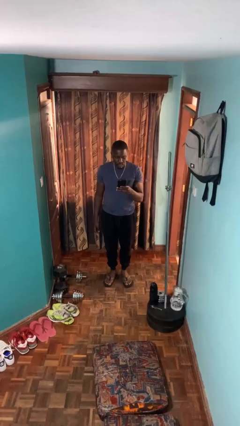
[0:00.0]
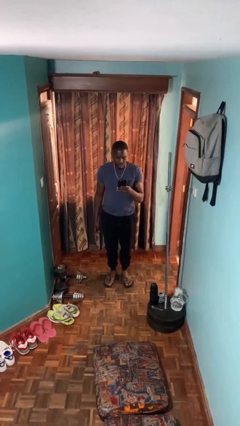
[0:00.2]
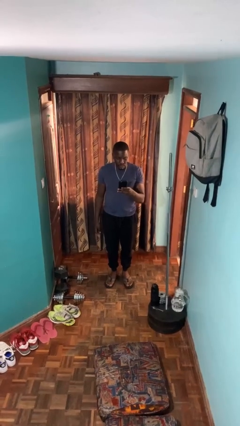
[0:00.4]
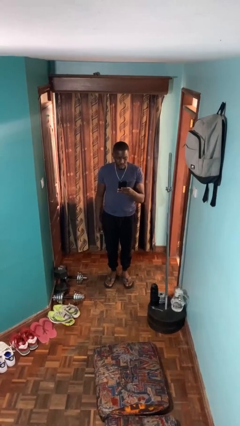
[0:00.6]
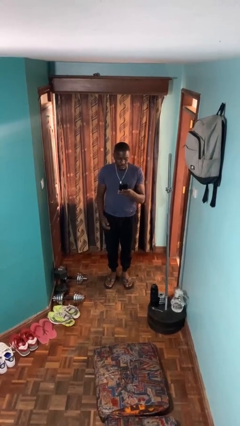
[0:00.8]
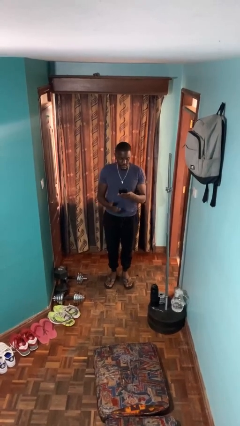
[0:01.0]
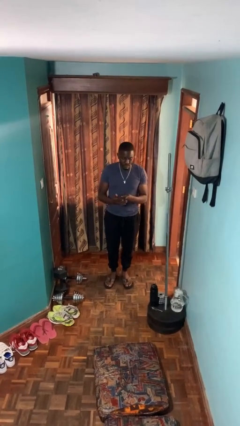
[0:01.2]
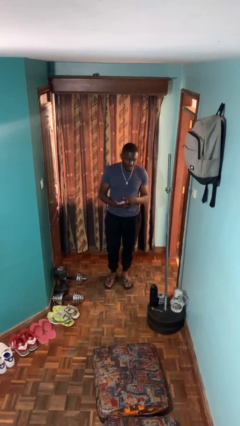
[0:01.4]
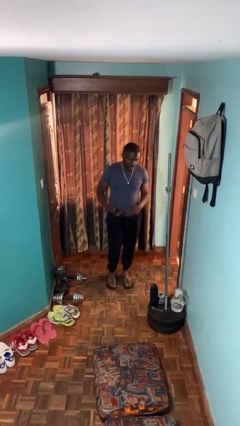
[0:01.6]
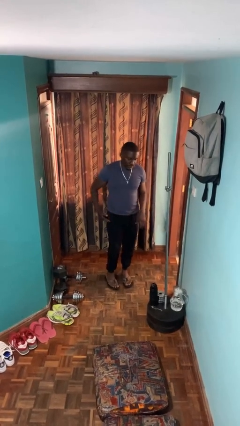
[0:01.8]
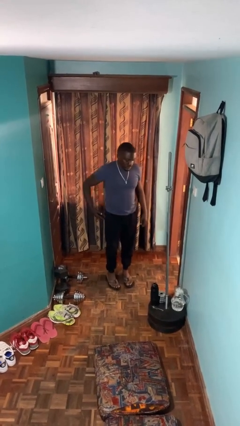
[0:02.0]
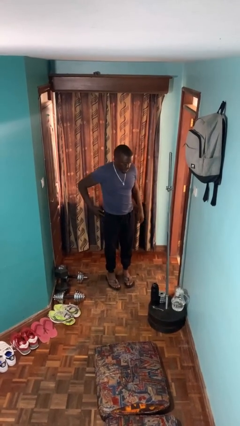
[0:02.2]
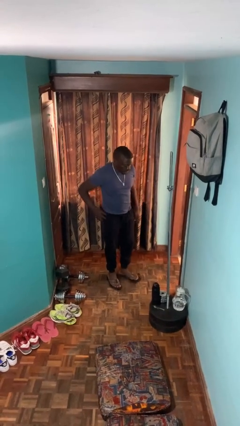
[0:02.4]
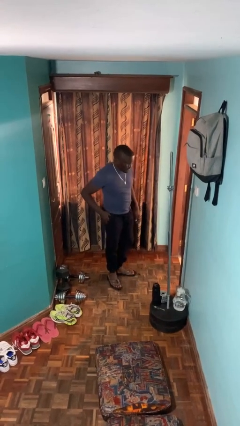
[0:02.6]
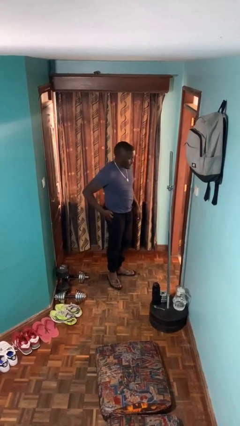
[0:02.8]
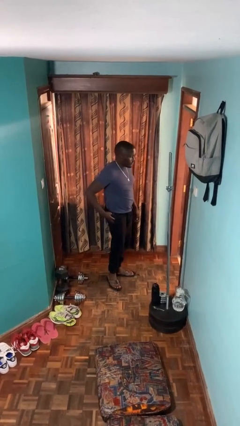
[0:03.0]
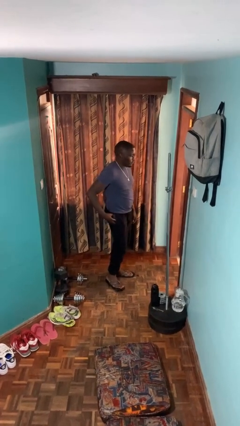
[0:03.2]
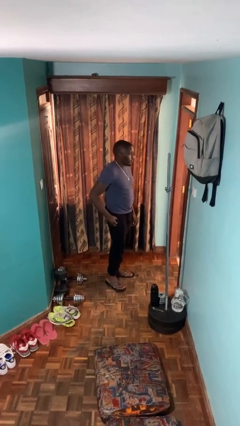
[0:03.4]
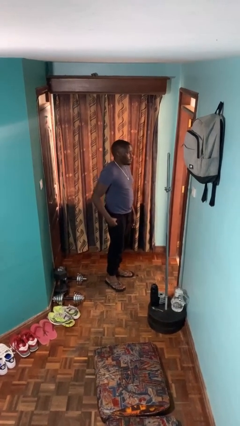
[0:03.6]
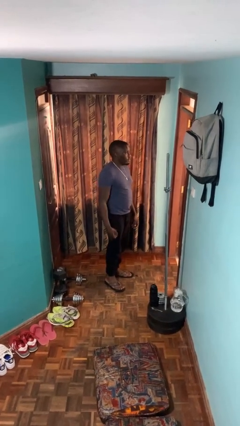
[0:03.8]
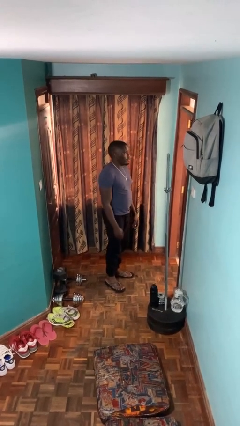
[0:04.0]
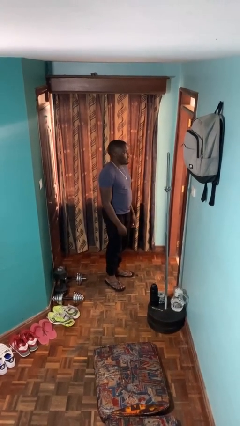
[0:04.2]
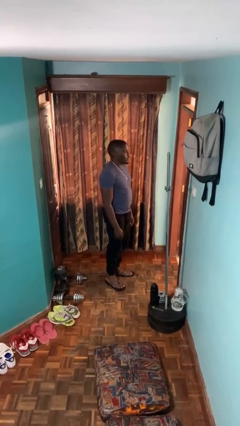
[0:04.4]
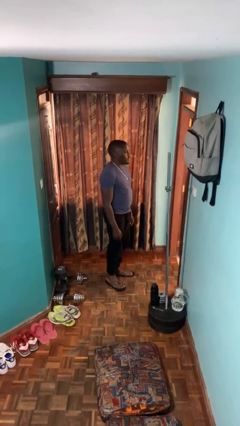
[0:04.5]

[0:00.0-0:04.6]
person puts phone into pocket

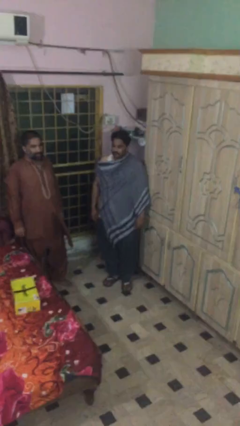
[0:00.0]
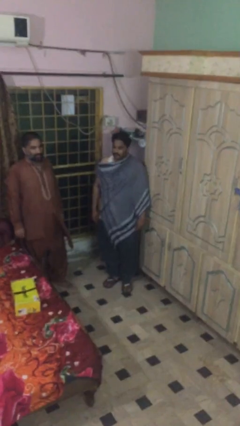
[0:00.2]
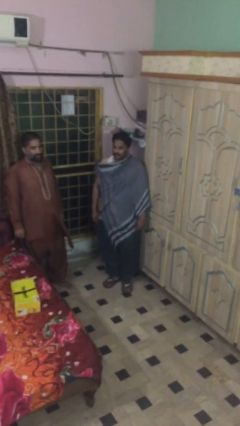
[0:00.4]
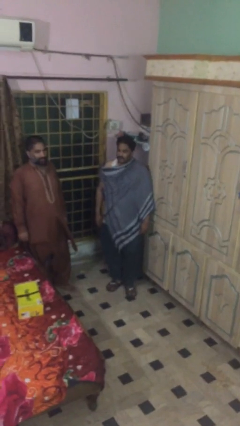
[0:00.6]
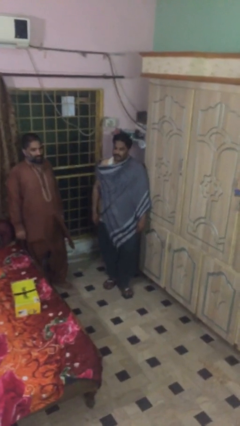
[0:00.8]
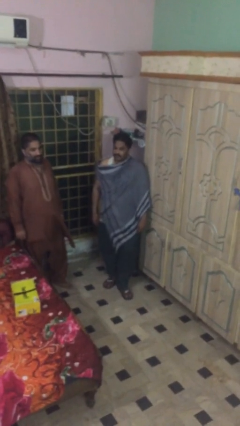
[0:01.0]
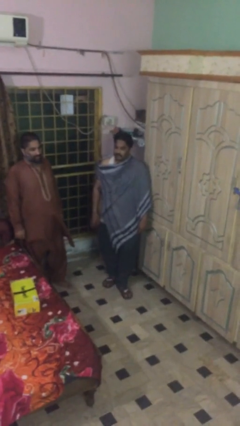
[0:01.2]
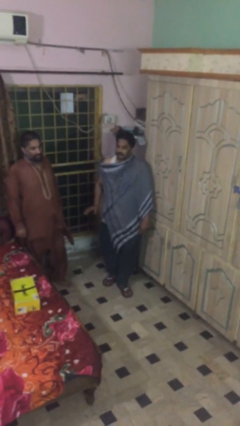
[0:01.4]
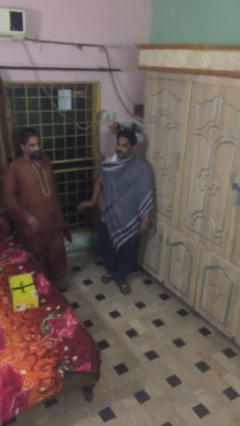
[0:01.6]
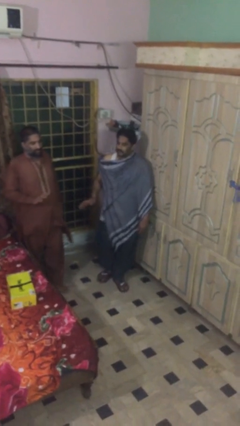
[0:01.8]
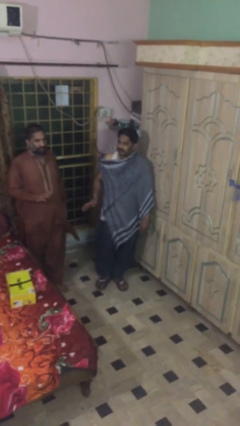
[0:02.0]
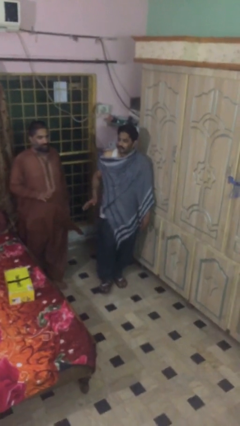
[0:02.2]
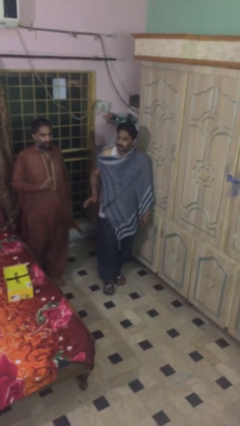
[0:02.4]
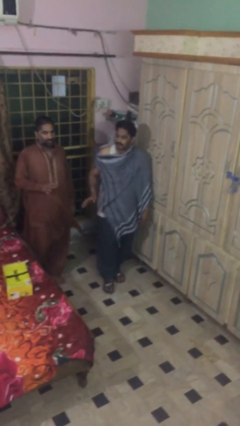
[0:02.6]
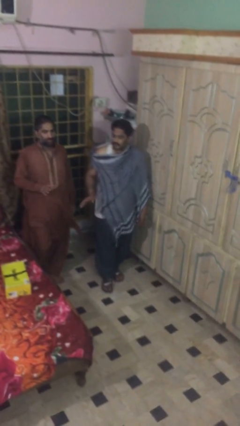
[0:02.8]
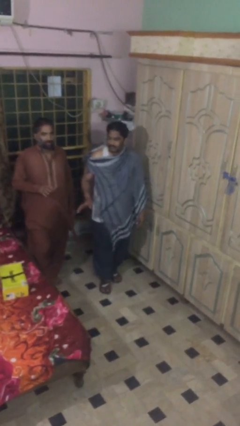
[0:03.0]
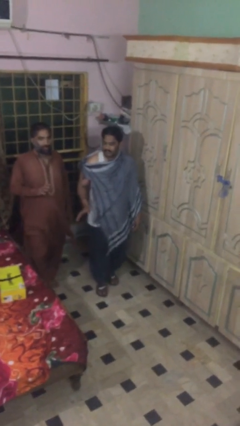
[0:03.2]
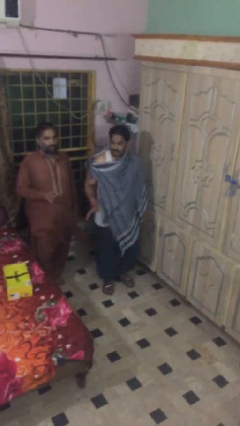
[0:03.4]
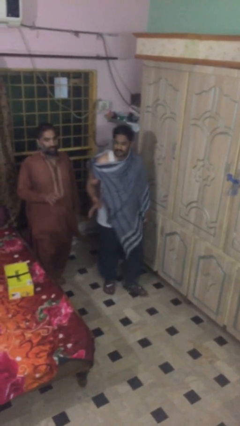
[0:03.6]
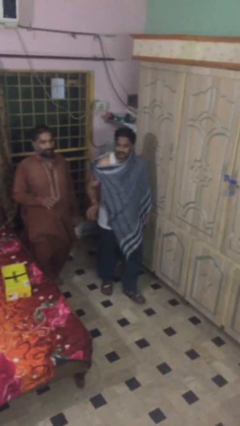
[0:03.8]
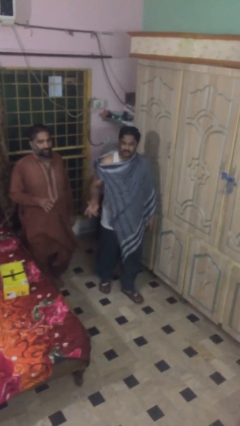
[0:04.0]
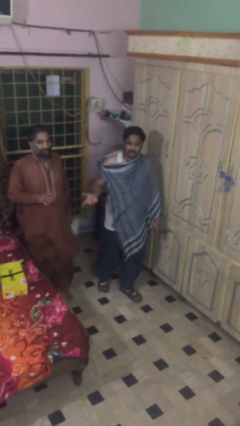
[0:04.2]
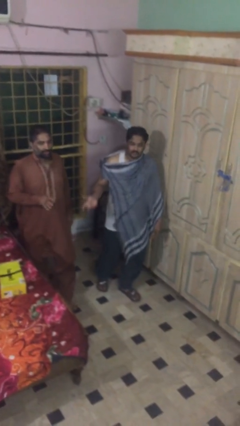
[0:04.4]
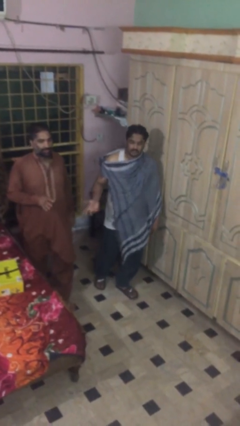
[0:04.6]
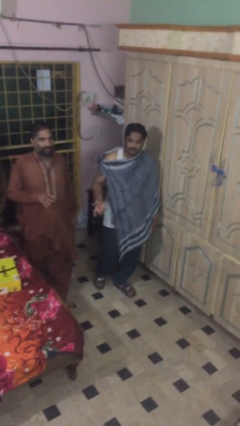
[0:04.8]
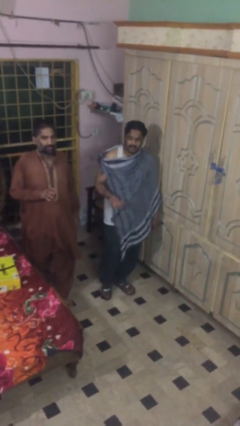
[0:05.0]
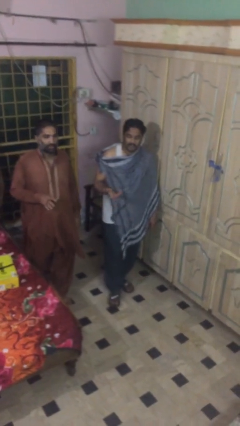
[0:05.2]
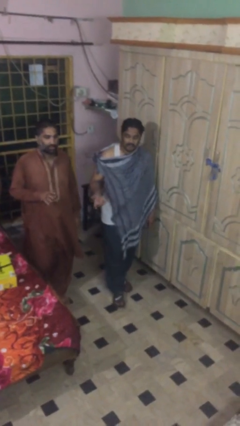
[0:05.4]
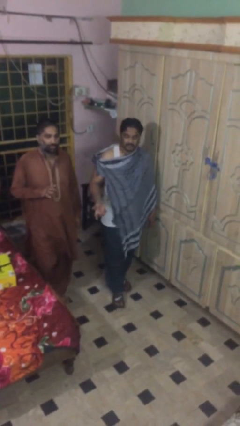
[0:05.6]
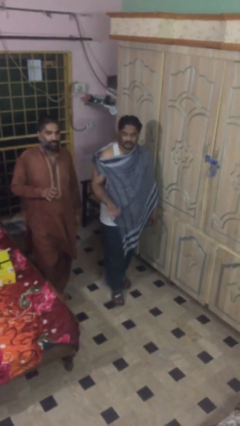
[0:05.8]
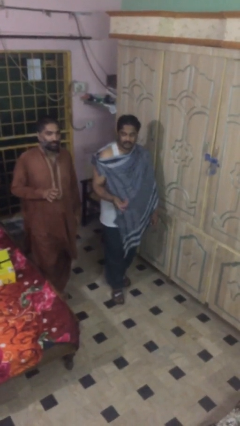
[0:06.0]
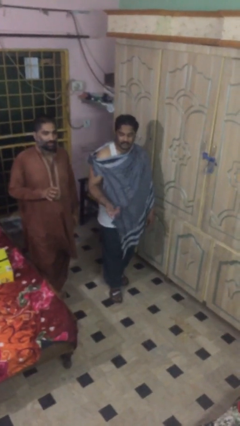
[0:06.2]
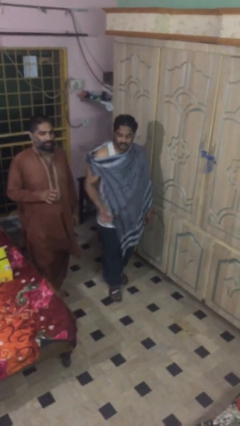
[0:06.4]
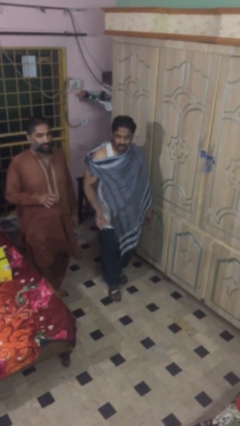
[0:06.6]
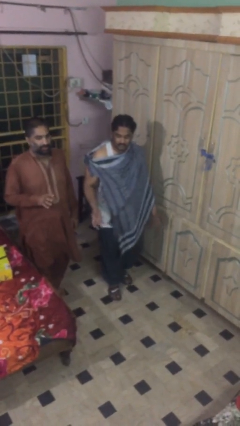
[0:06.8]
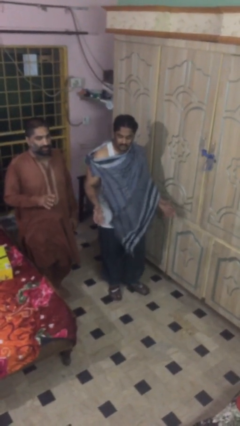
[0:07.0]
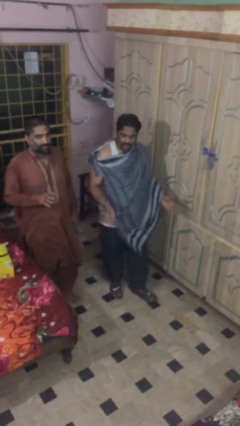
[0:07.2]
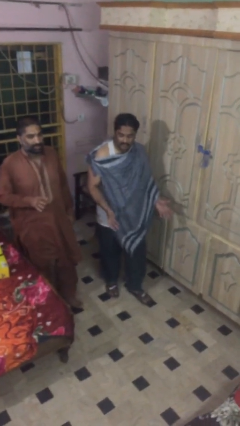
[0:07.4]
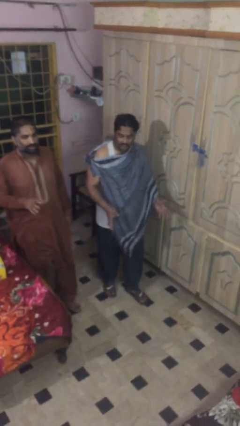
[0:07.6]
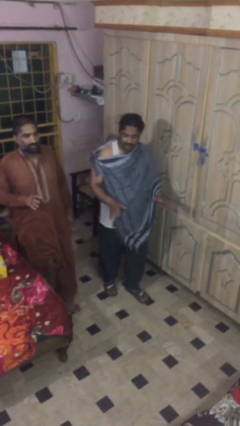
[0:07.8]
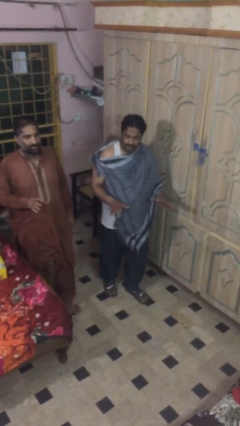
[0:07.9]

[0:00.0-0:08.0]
person talks to person

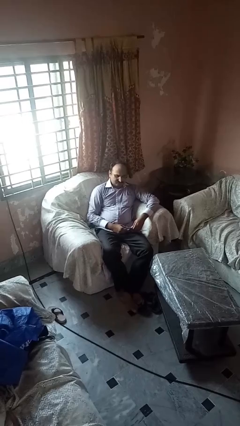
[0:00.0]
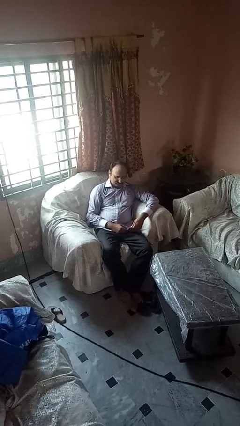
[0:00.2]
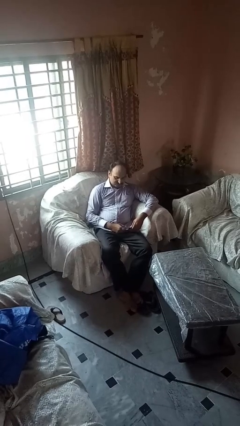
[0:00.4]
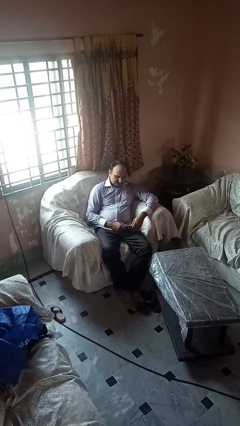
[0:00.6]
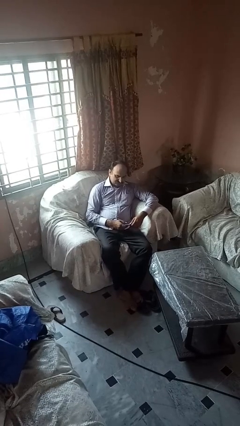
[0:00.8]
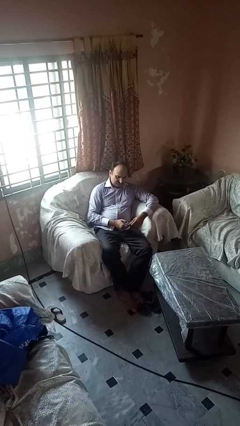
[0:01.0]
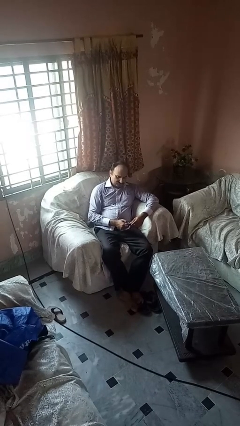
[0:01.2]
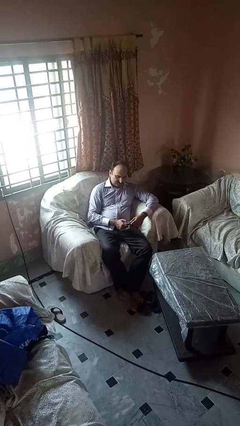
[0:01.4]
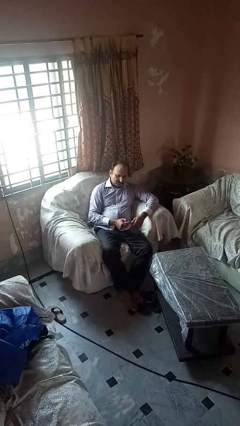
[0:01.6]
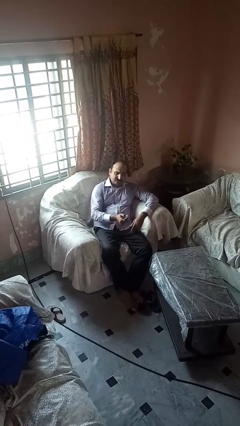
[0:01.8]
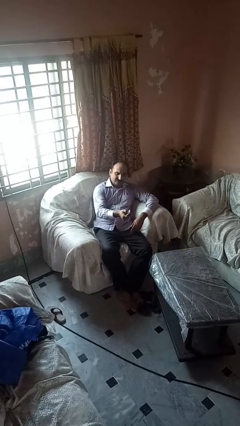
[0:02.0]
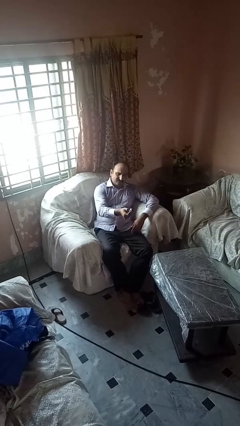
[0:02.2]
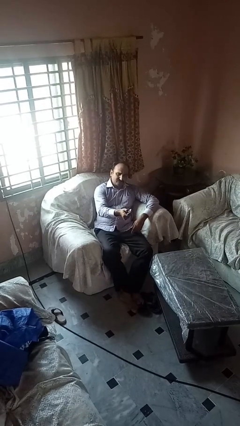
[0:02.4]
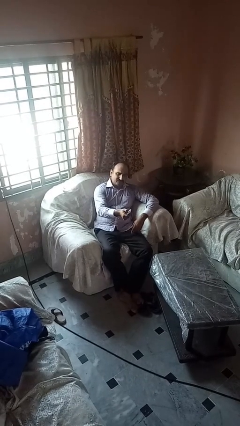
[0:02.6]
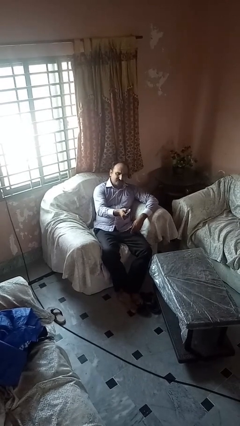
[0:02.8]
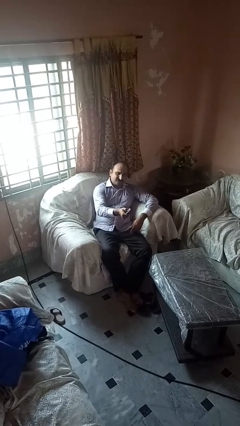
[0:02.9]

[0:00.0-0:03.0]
person uses television remote

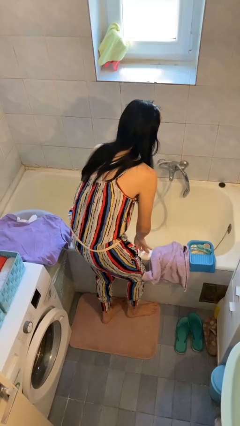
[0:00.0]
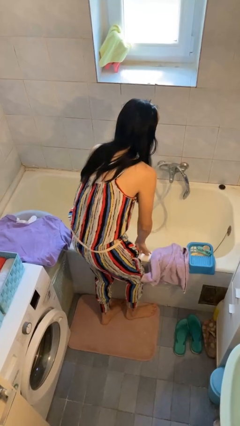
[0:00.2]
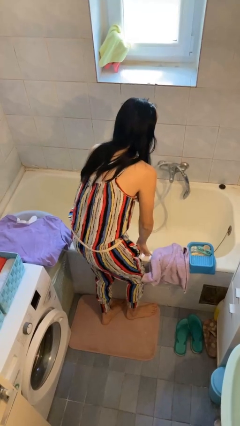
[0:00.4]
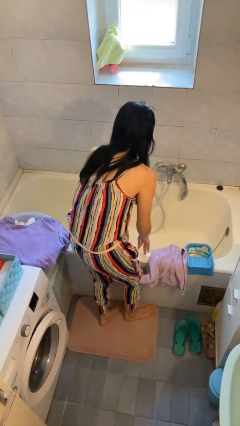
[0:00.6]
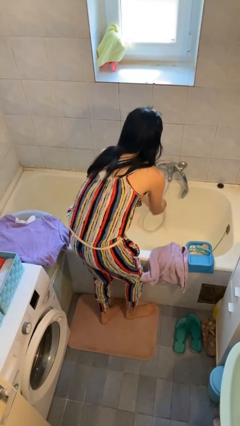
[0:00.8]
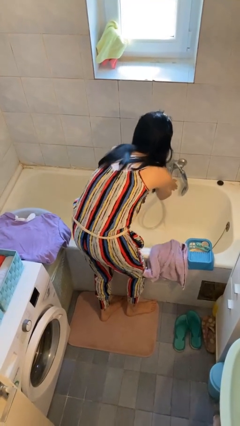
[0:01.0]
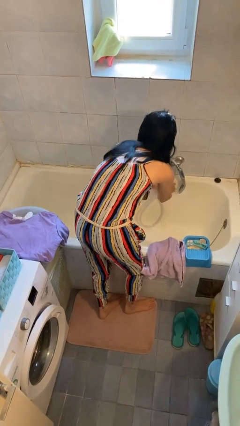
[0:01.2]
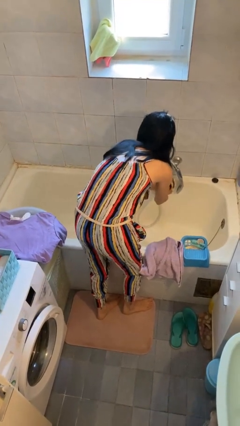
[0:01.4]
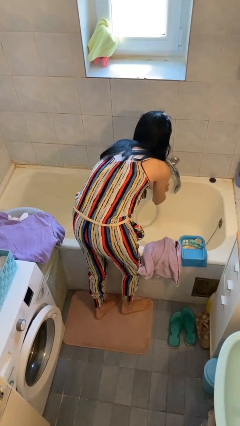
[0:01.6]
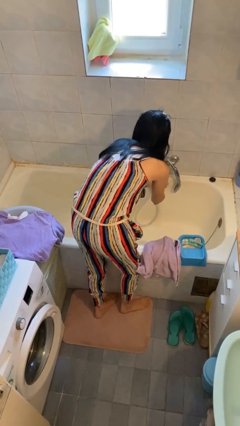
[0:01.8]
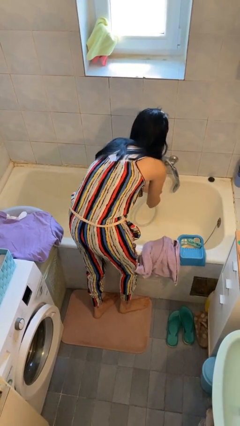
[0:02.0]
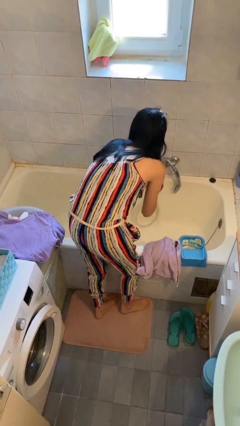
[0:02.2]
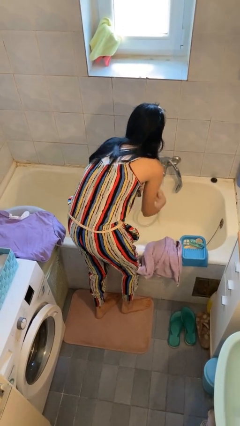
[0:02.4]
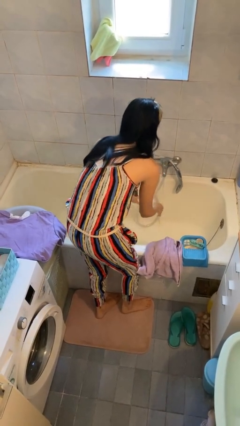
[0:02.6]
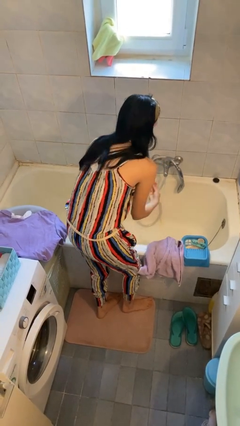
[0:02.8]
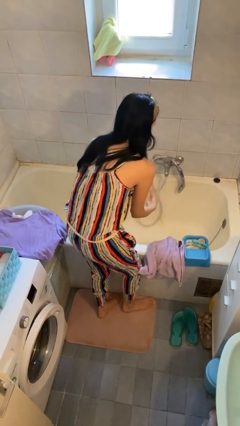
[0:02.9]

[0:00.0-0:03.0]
person washes hands
